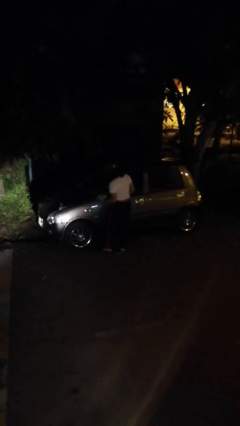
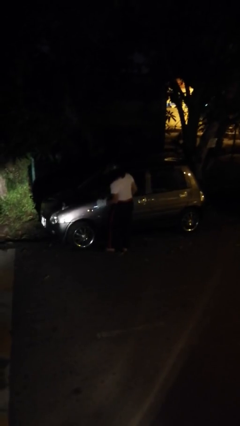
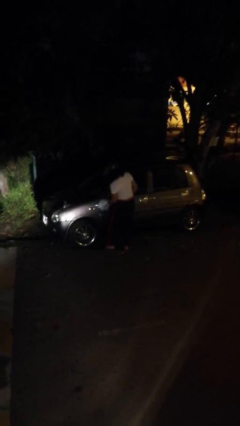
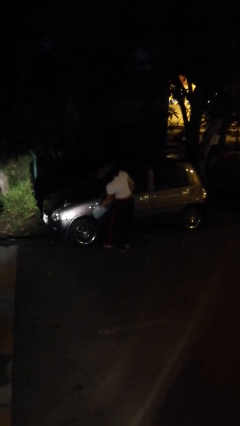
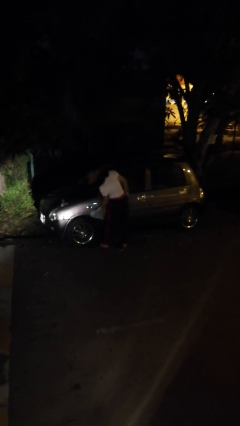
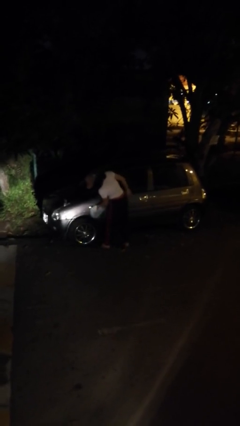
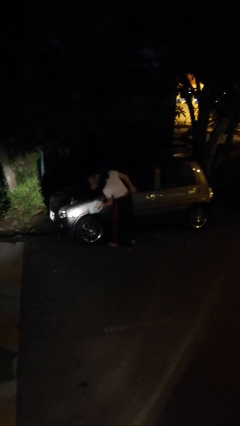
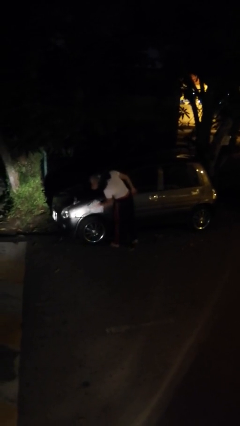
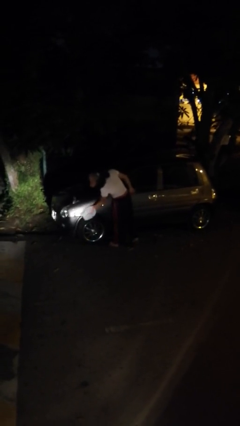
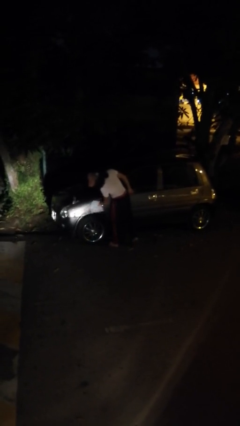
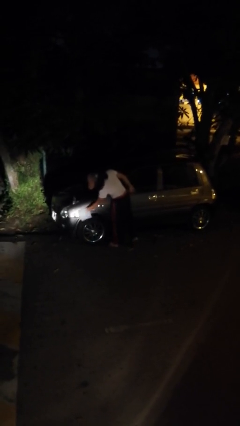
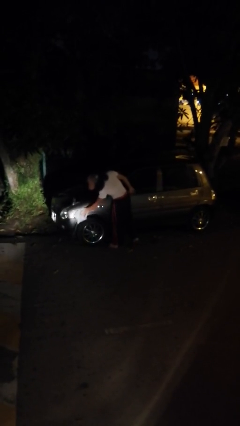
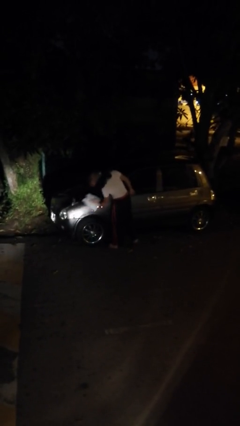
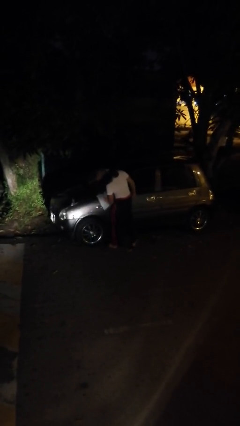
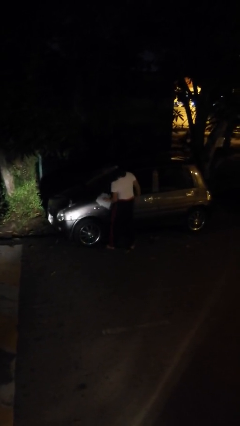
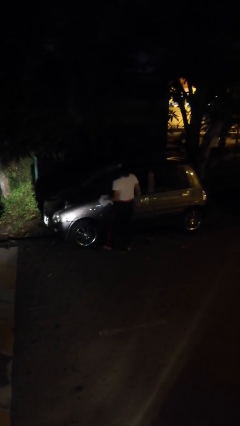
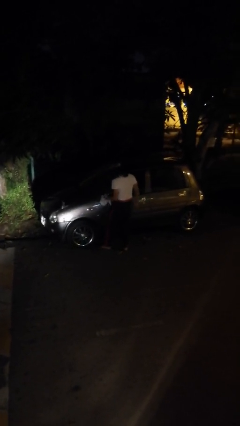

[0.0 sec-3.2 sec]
person polishes car with rag

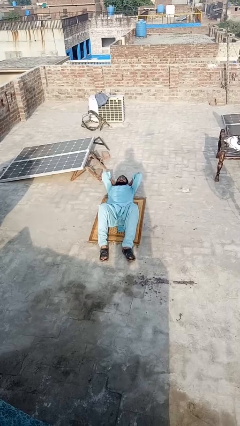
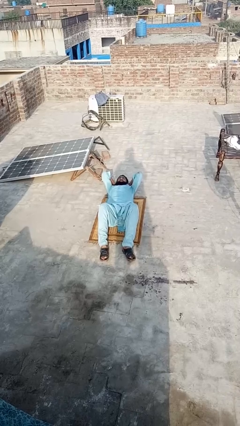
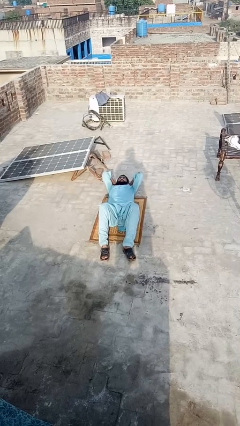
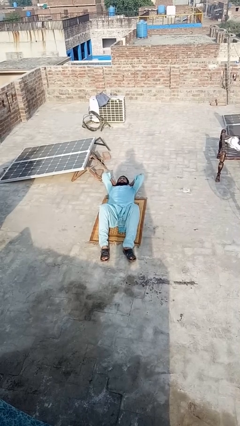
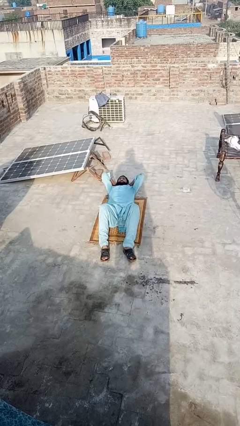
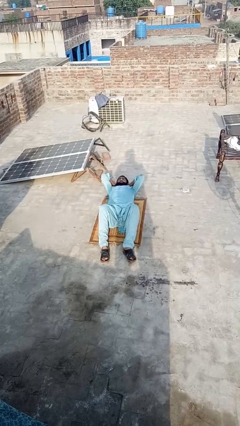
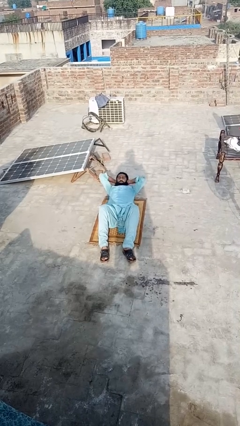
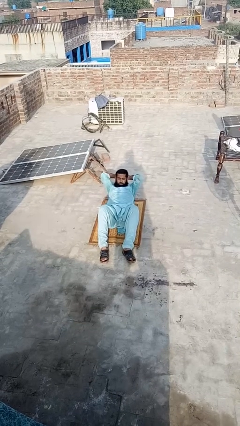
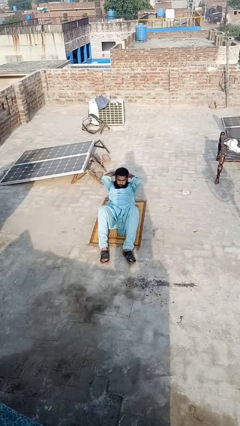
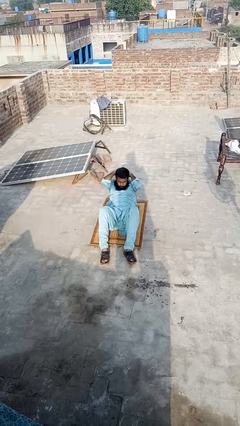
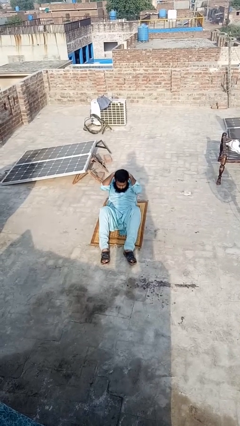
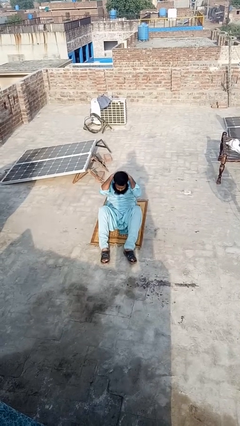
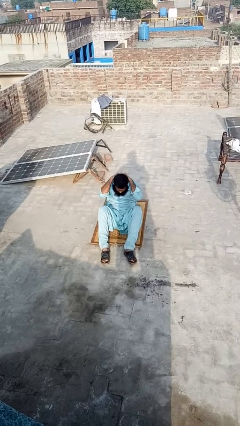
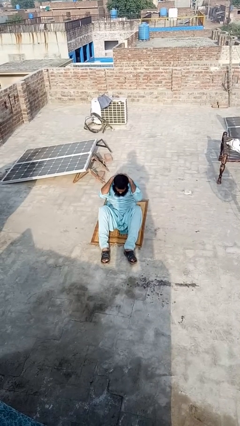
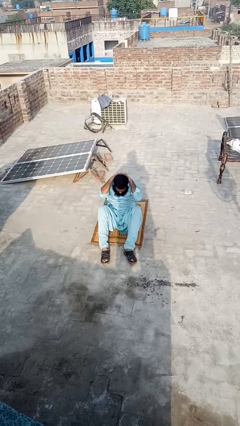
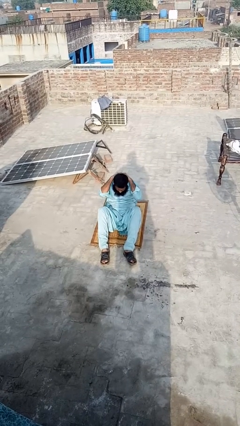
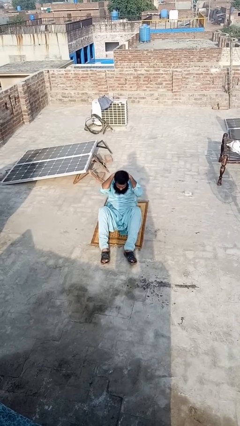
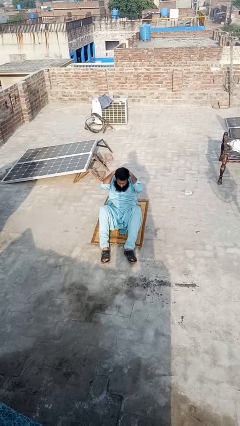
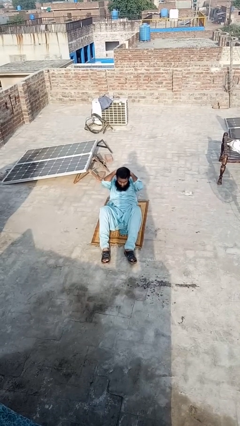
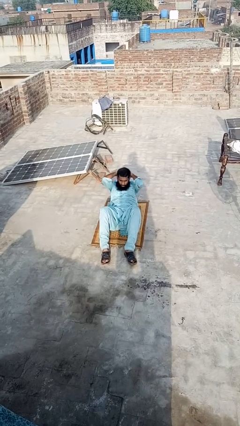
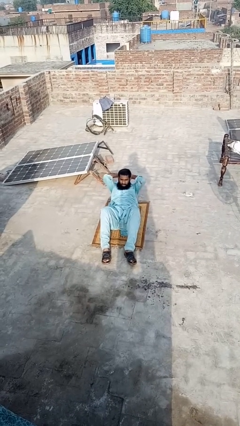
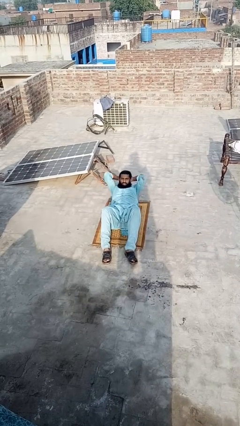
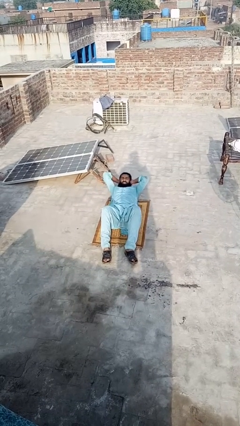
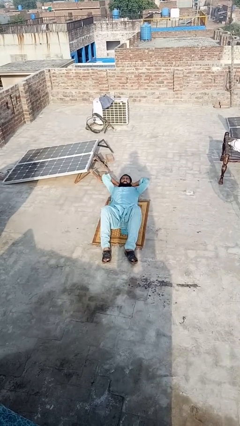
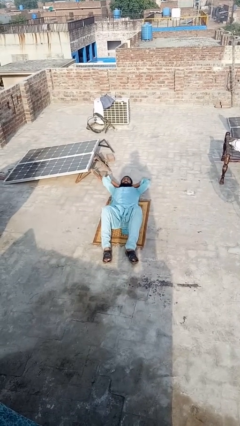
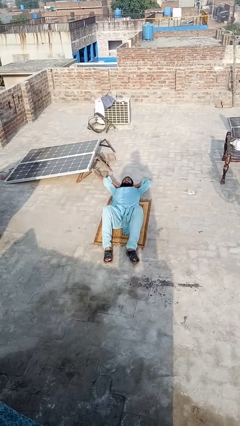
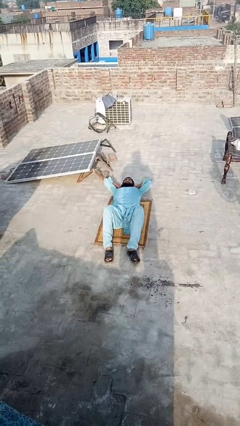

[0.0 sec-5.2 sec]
person exercises with situp

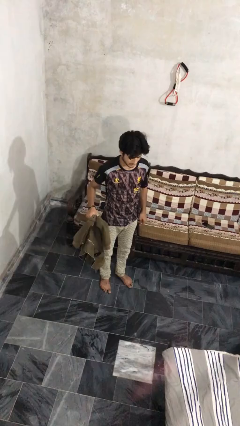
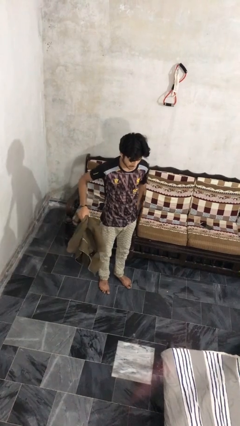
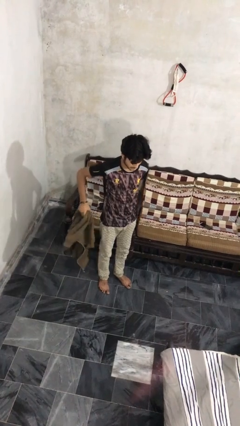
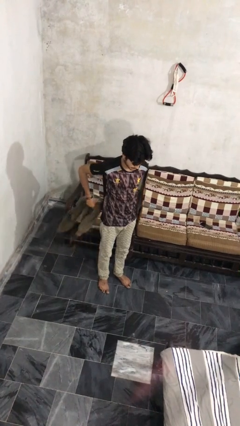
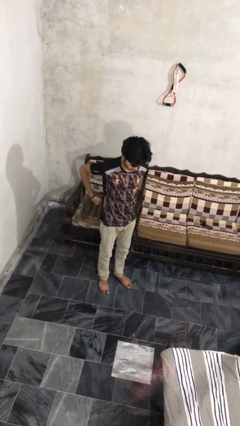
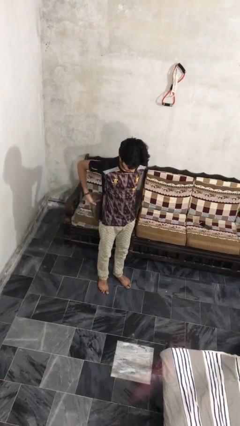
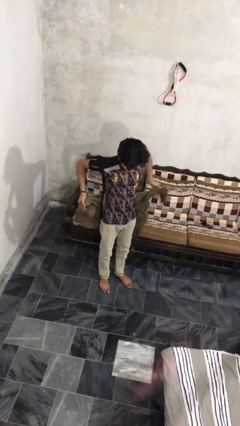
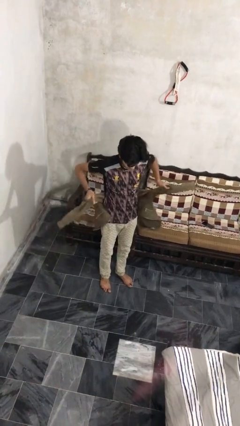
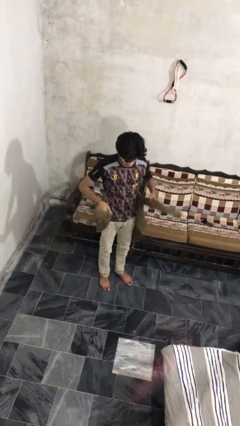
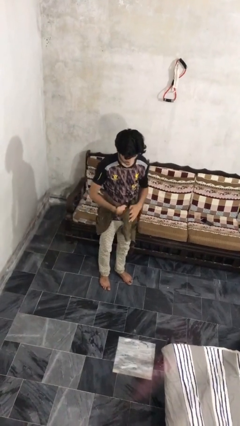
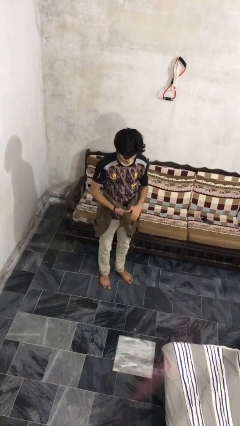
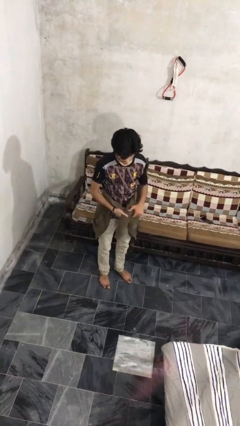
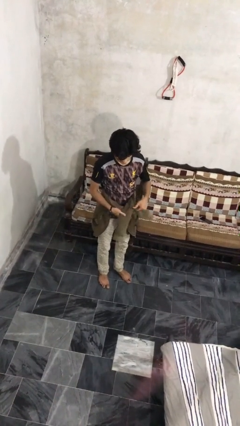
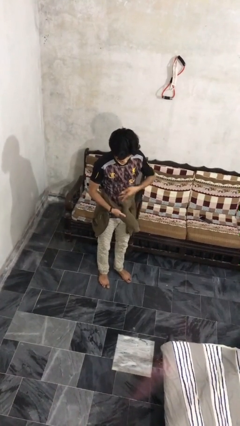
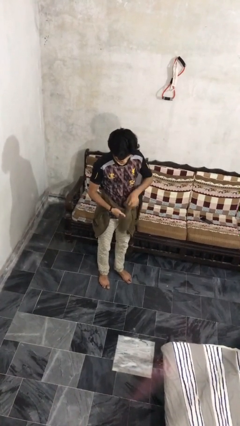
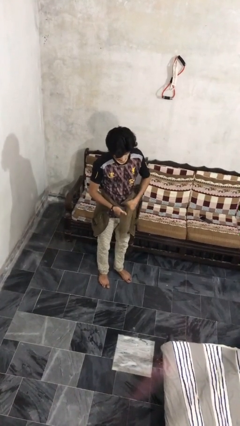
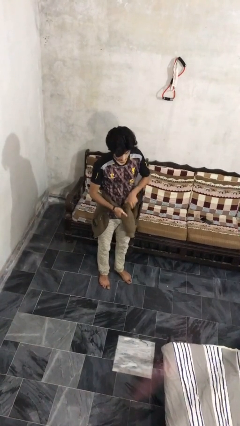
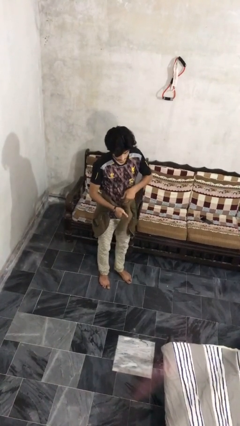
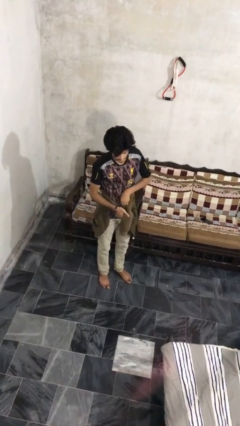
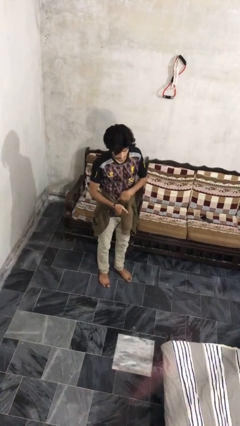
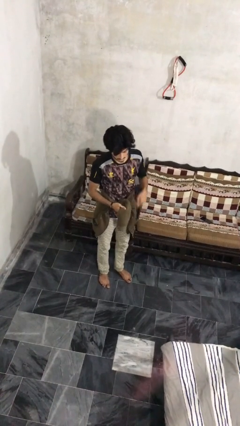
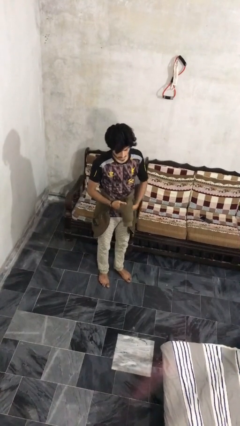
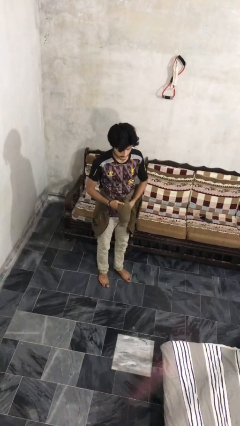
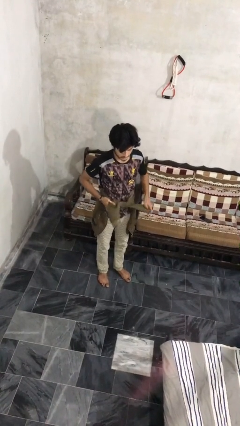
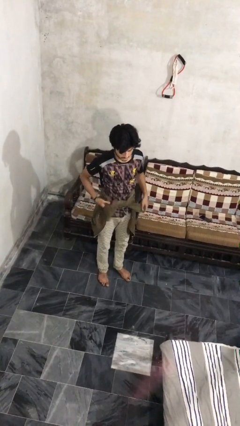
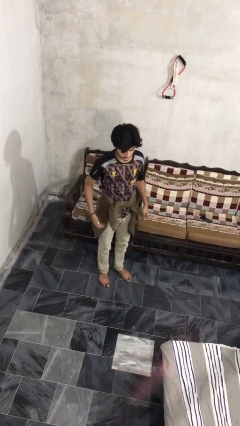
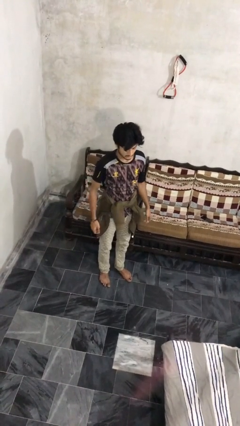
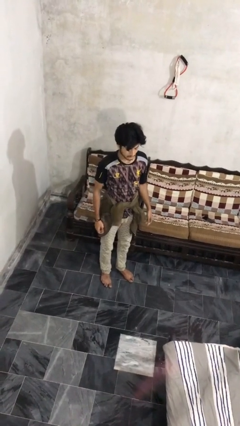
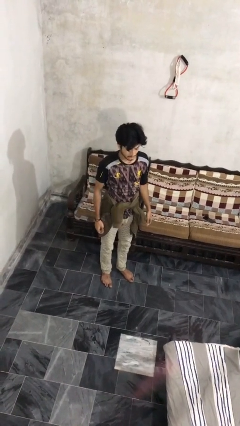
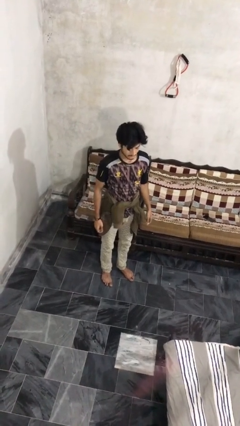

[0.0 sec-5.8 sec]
person ties jacket around waist

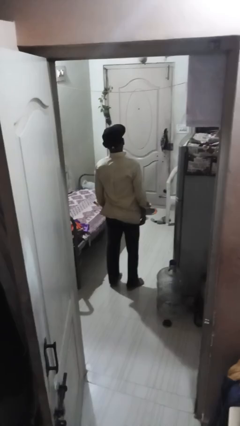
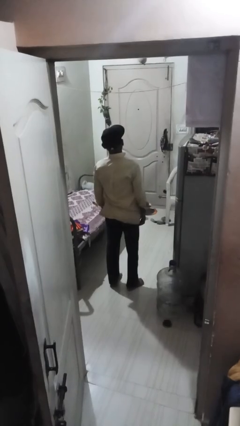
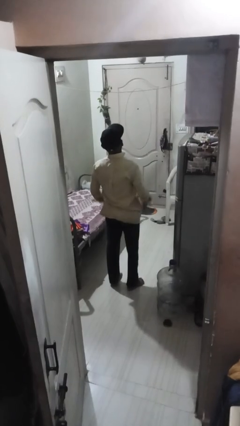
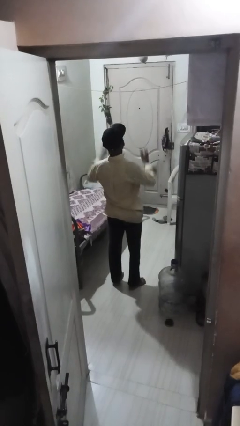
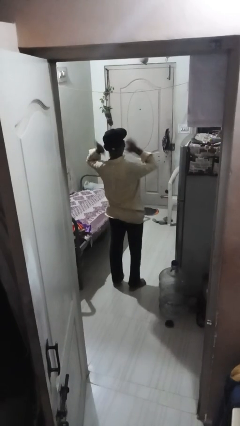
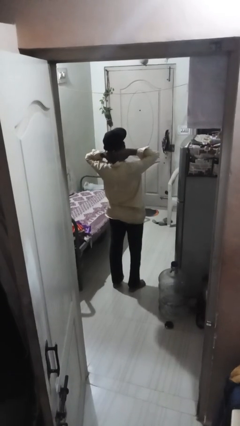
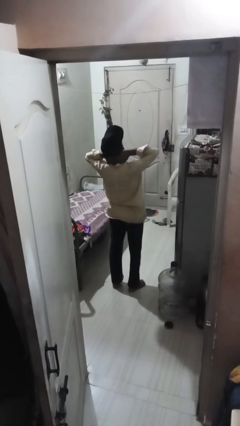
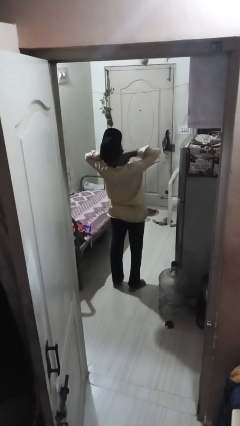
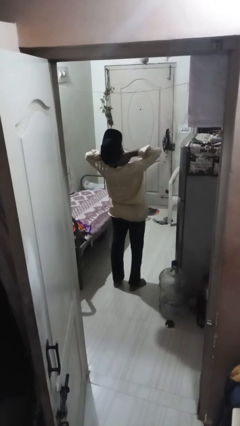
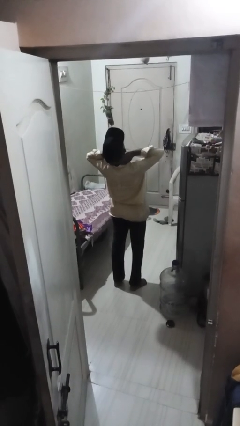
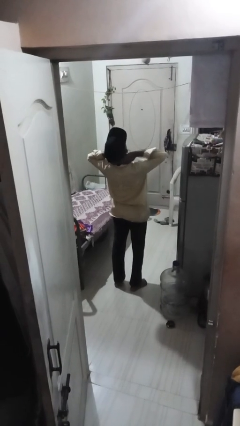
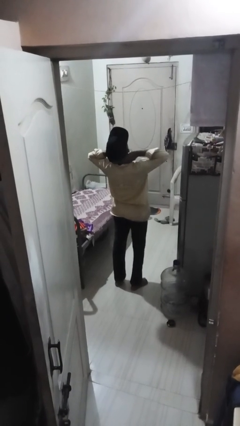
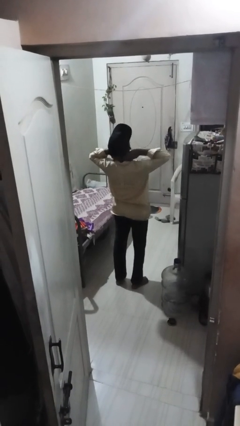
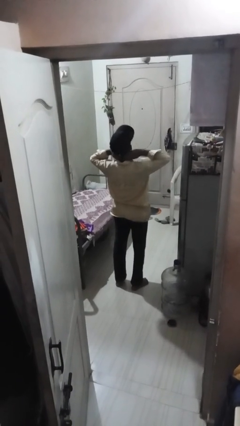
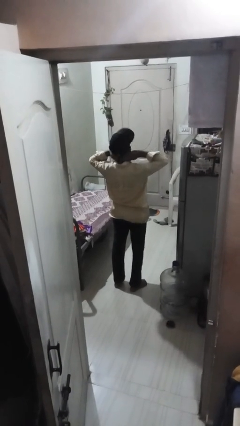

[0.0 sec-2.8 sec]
person rubs neck

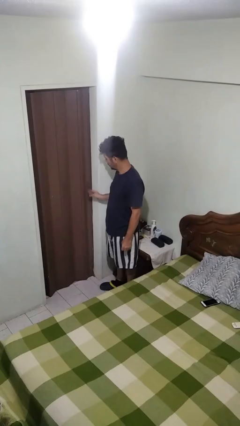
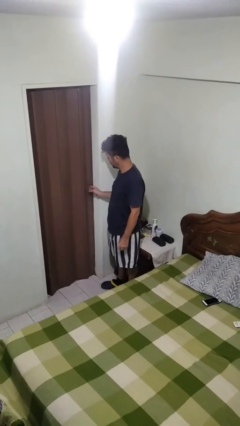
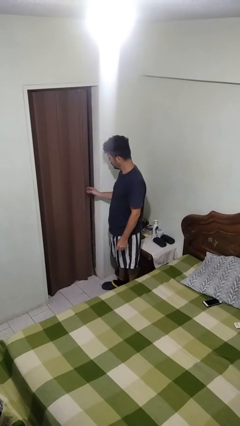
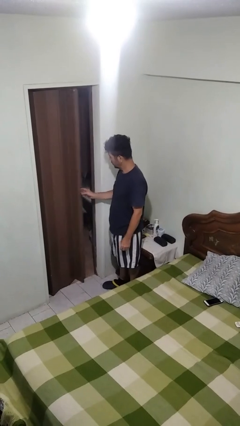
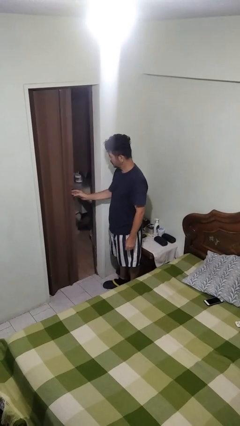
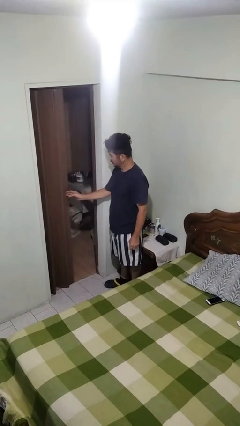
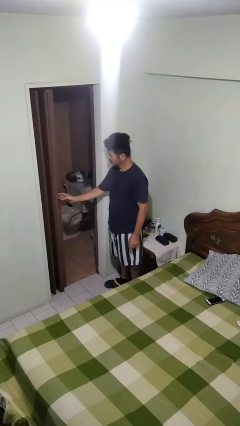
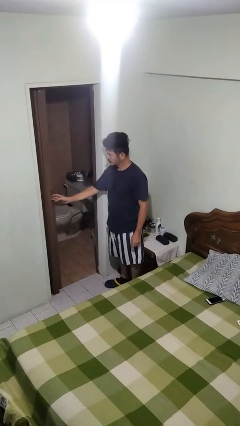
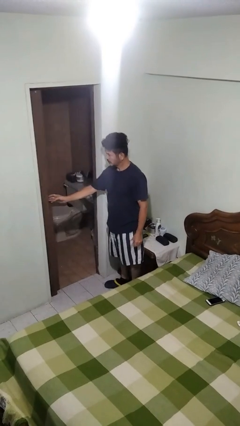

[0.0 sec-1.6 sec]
person opens sliding door
